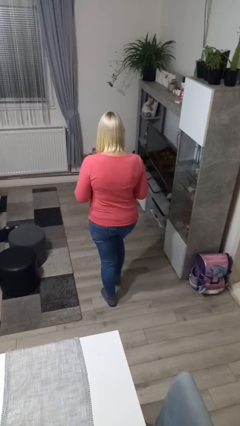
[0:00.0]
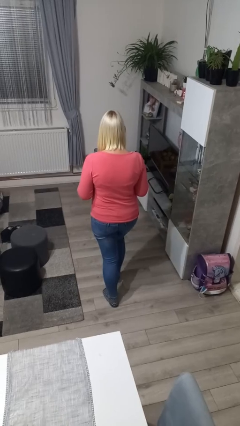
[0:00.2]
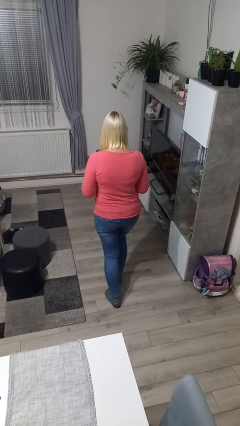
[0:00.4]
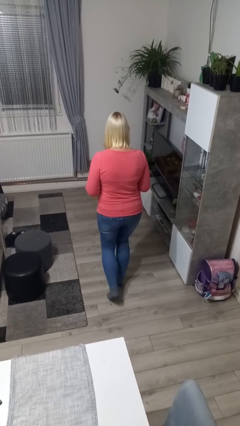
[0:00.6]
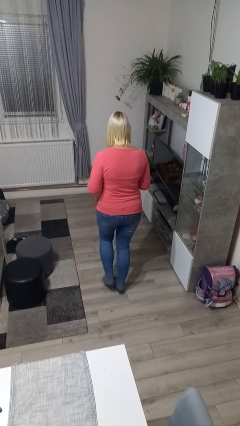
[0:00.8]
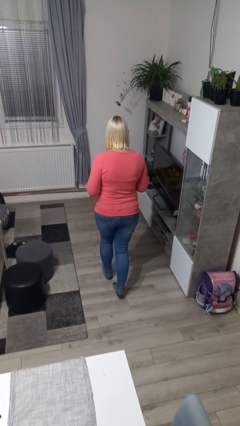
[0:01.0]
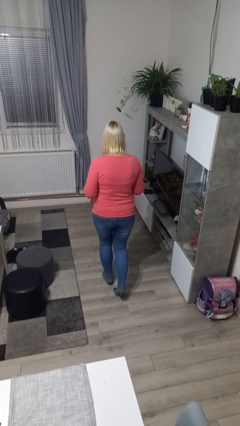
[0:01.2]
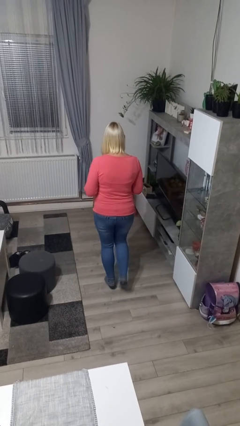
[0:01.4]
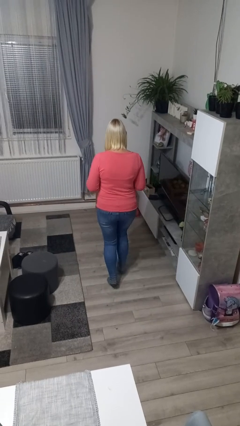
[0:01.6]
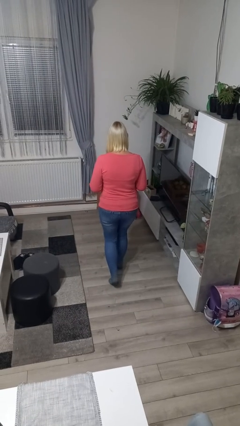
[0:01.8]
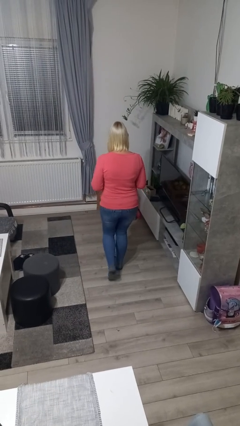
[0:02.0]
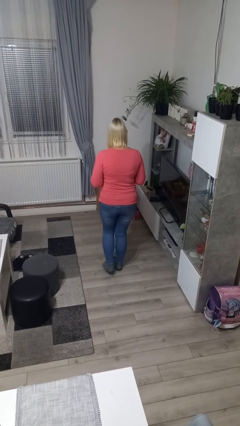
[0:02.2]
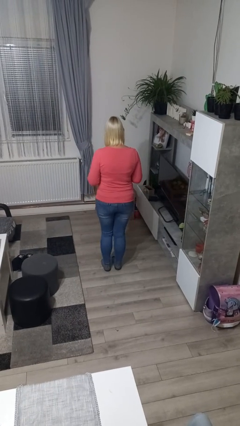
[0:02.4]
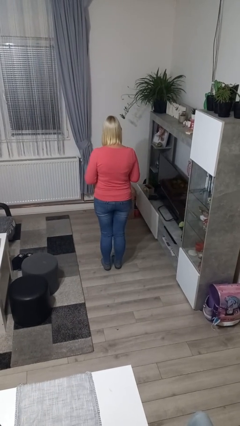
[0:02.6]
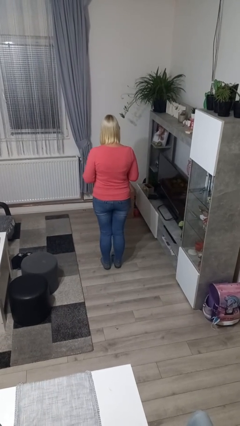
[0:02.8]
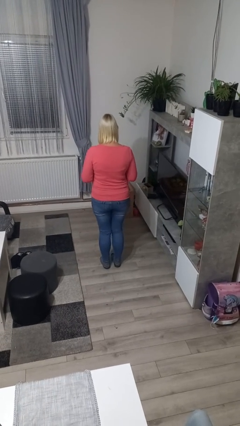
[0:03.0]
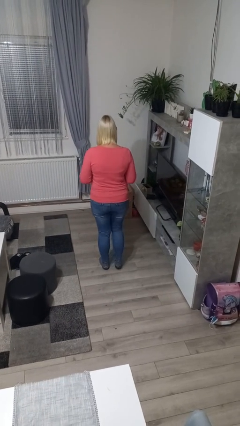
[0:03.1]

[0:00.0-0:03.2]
person walks tiptoe

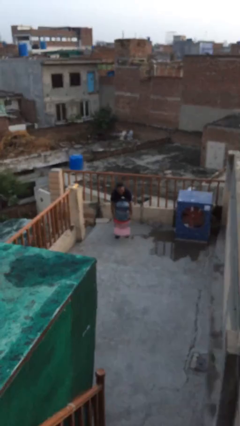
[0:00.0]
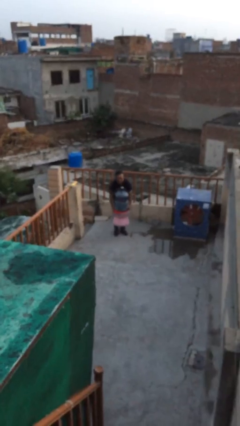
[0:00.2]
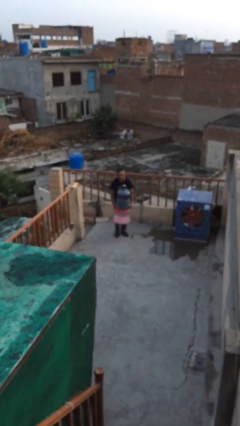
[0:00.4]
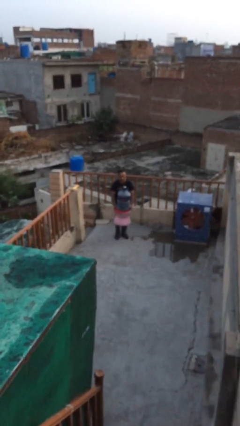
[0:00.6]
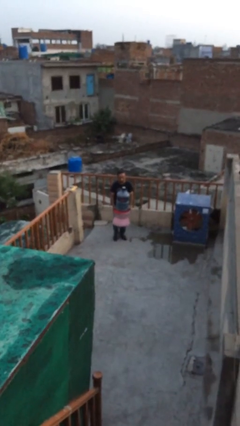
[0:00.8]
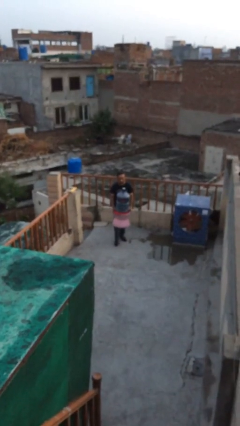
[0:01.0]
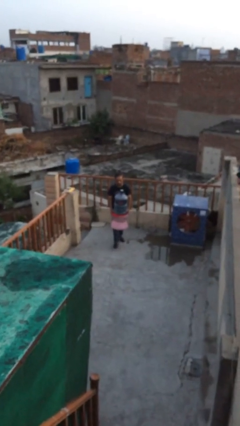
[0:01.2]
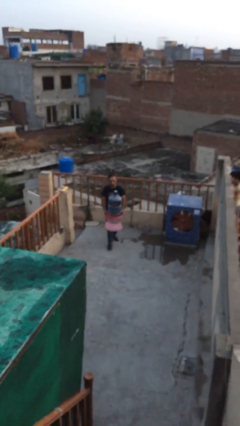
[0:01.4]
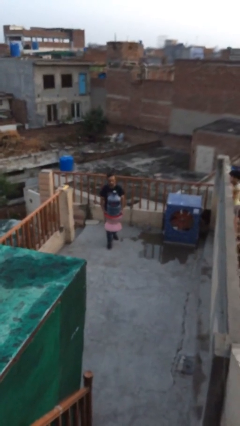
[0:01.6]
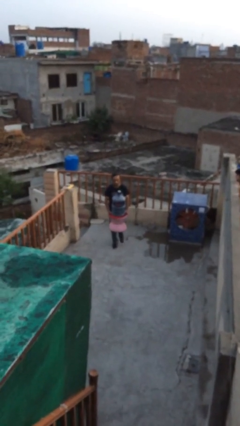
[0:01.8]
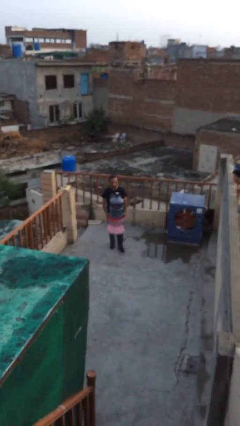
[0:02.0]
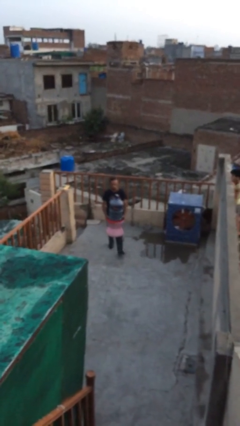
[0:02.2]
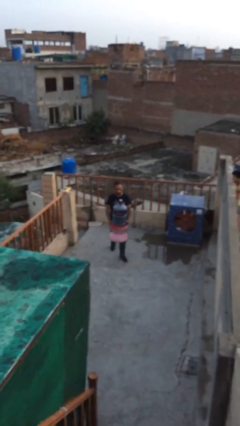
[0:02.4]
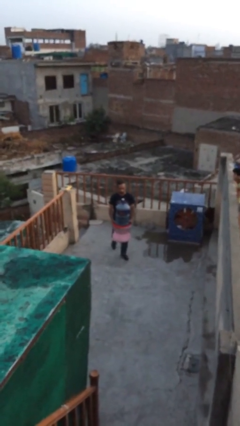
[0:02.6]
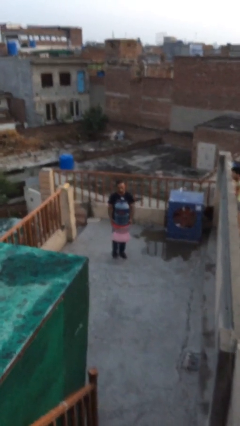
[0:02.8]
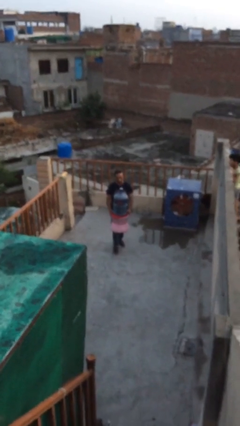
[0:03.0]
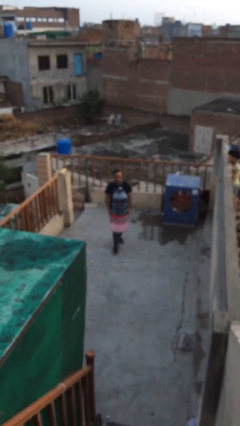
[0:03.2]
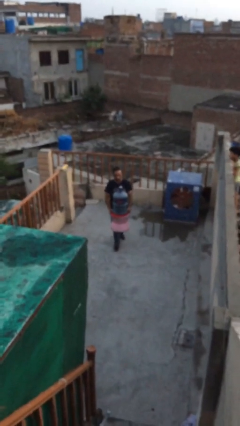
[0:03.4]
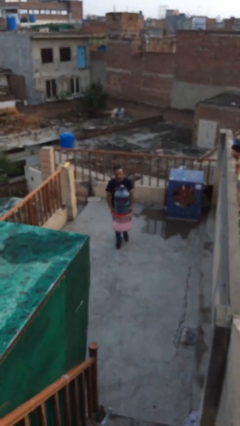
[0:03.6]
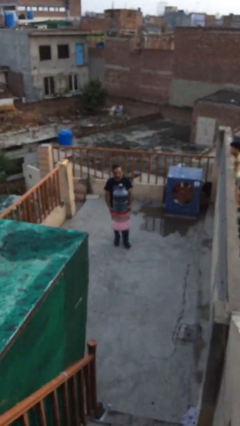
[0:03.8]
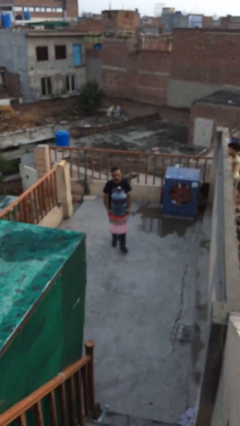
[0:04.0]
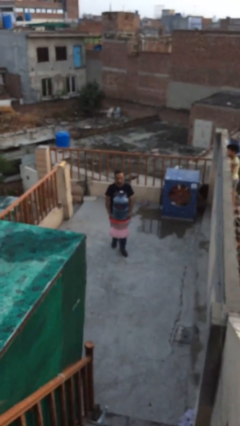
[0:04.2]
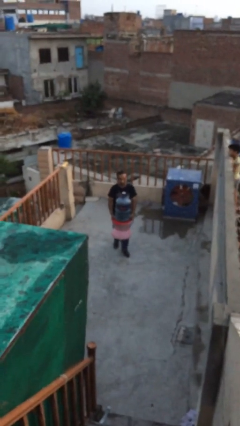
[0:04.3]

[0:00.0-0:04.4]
person carries heavy object

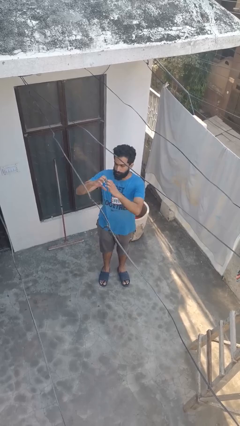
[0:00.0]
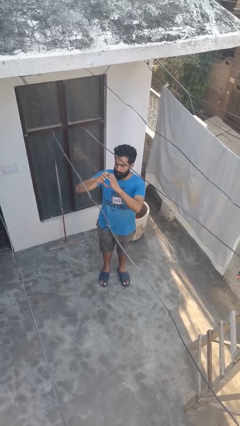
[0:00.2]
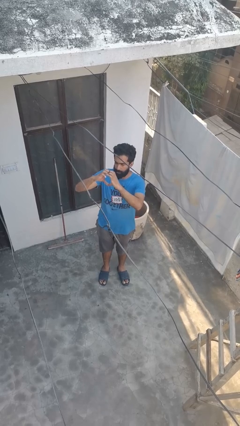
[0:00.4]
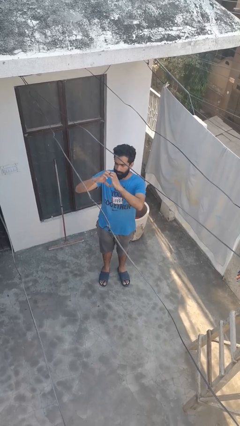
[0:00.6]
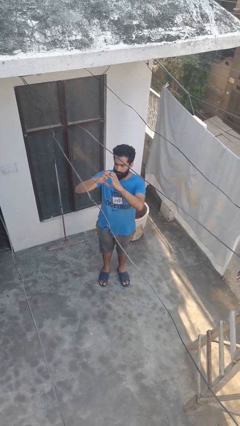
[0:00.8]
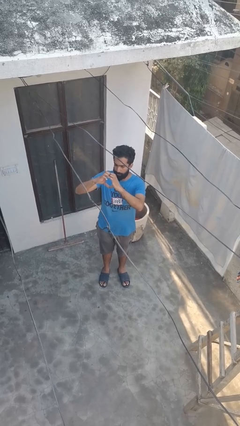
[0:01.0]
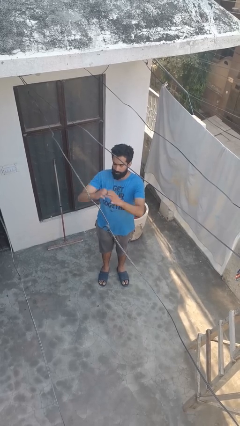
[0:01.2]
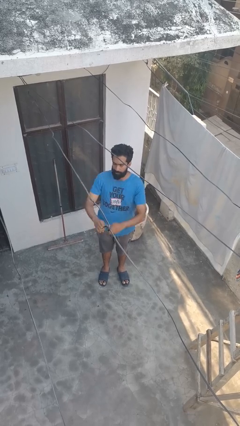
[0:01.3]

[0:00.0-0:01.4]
person gestures heart

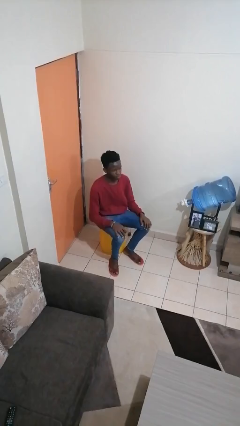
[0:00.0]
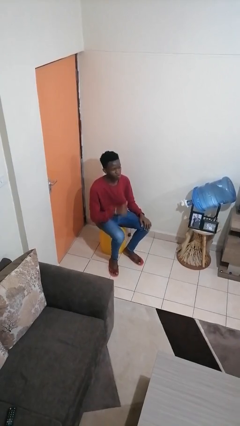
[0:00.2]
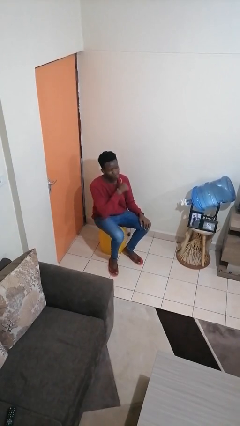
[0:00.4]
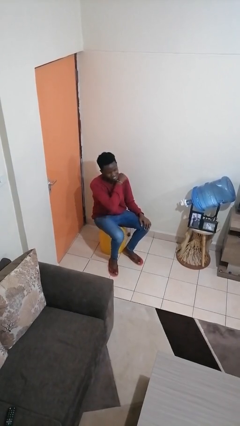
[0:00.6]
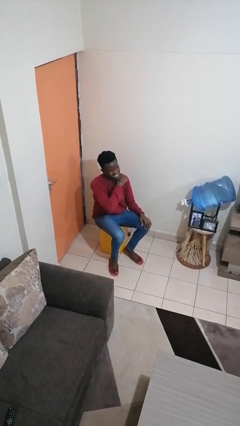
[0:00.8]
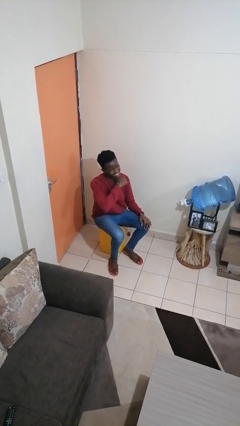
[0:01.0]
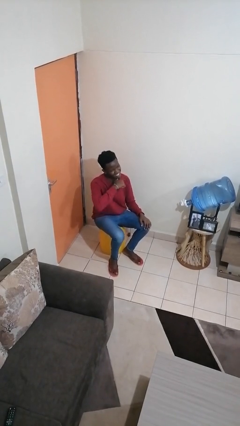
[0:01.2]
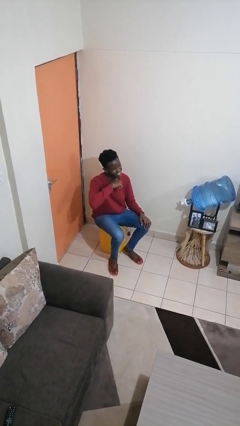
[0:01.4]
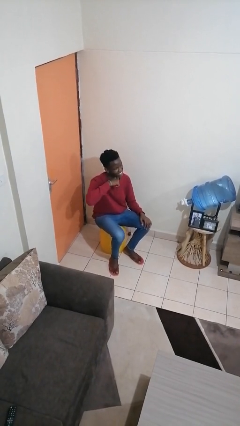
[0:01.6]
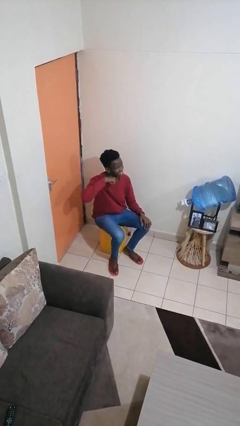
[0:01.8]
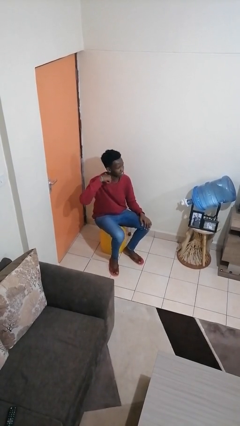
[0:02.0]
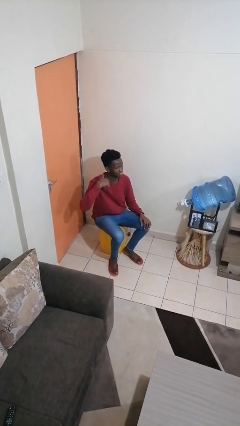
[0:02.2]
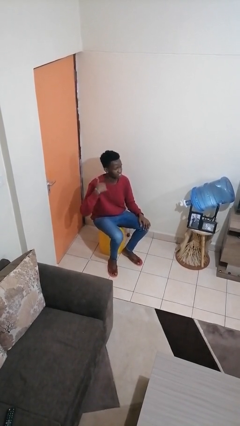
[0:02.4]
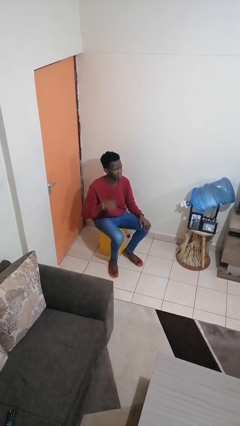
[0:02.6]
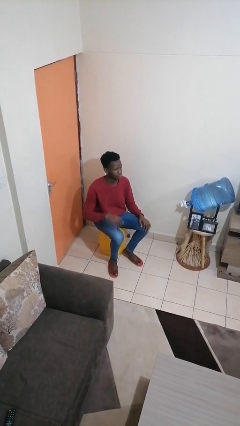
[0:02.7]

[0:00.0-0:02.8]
person gestures cut

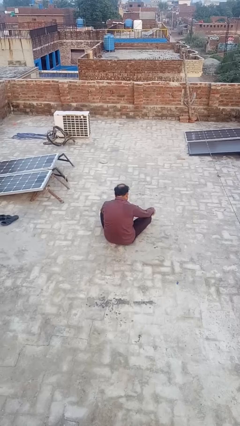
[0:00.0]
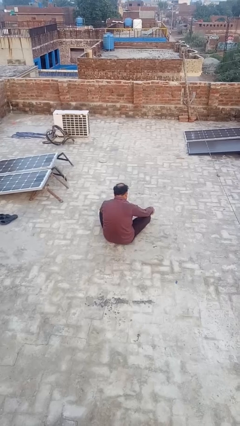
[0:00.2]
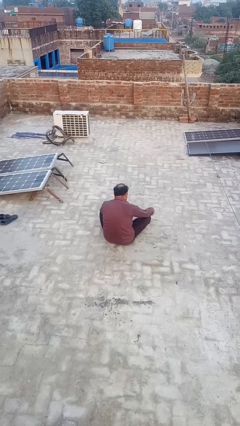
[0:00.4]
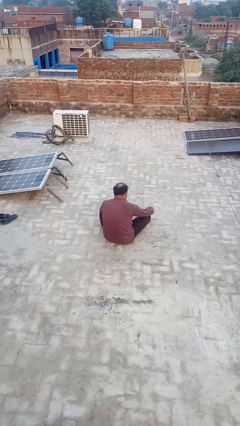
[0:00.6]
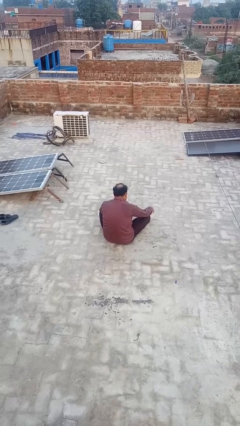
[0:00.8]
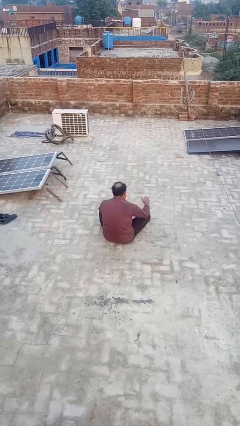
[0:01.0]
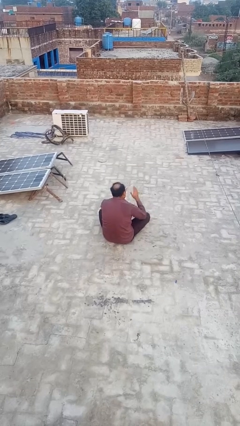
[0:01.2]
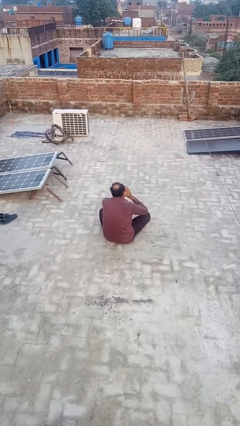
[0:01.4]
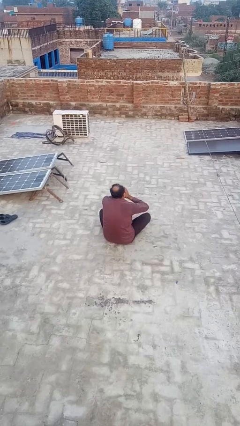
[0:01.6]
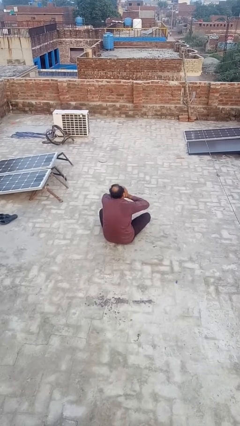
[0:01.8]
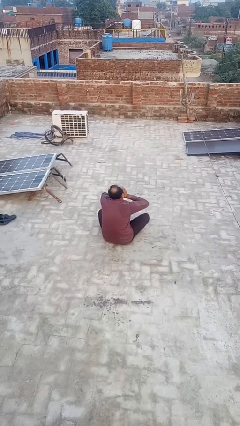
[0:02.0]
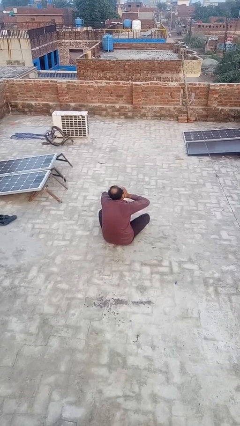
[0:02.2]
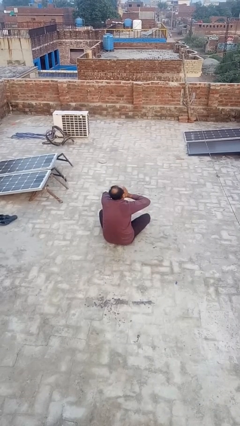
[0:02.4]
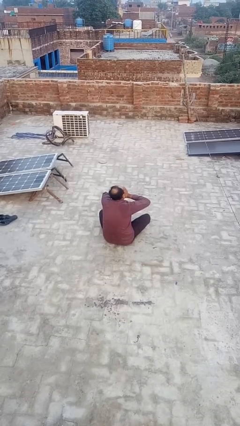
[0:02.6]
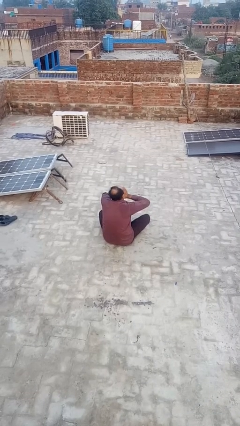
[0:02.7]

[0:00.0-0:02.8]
person yawns

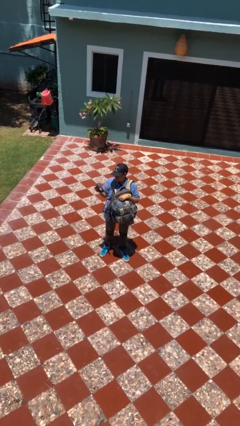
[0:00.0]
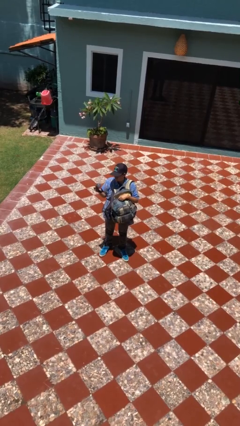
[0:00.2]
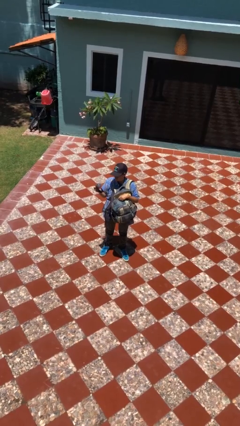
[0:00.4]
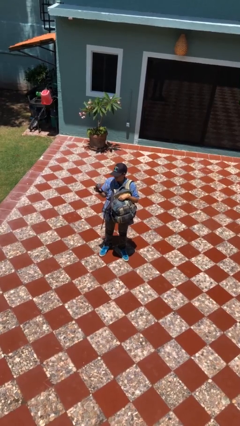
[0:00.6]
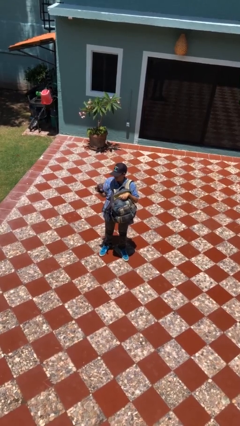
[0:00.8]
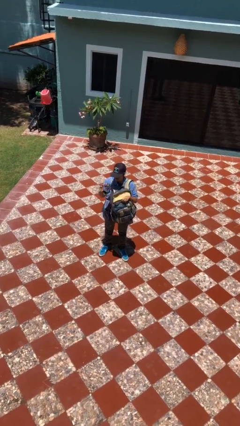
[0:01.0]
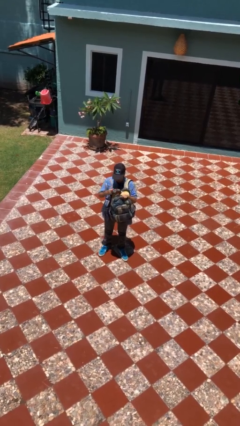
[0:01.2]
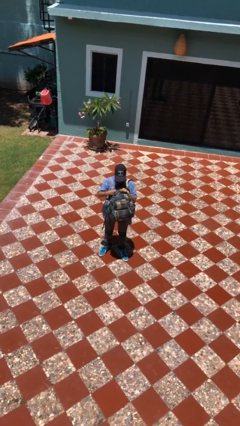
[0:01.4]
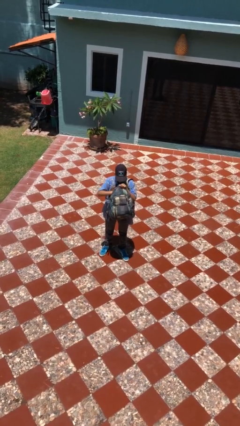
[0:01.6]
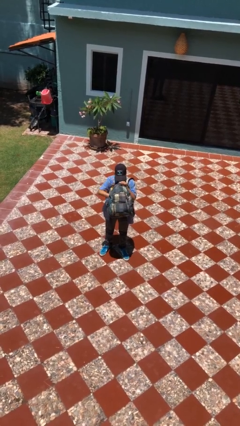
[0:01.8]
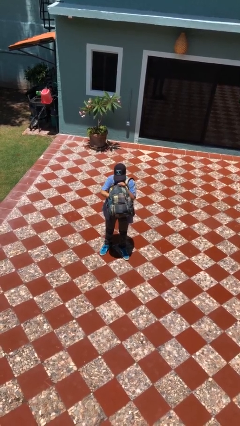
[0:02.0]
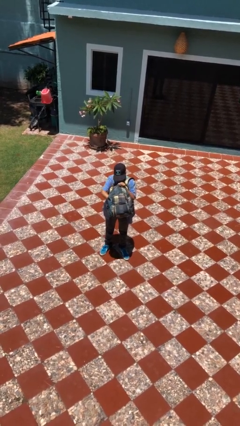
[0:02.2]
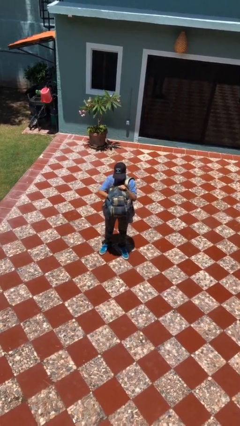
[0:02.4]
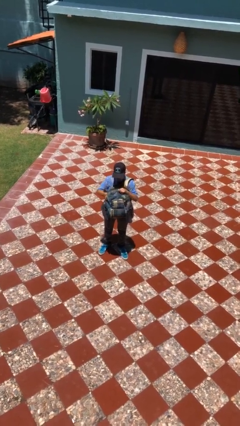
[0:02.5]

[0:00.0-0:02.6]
person puts object into backpack
